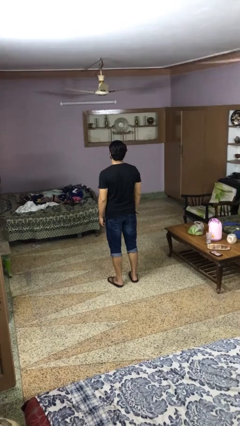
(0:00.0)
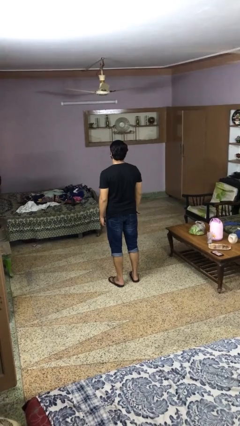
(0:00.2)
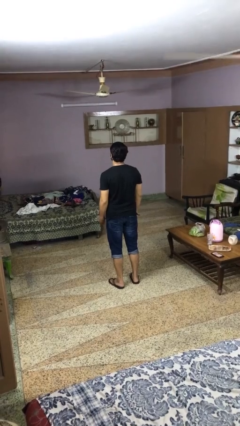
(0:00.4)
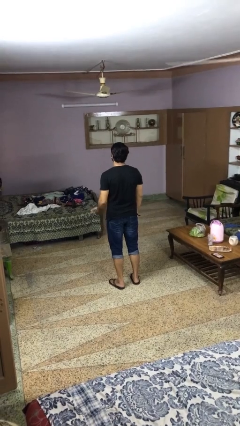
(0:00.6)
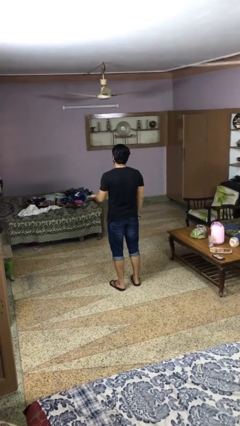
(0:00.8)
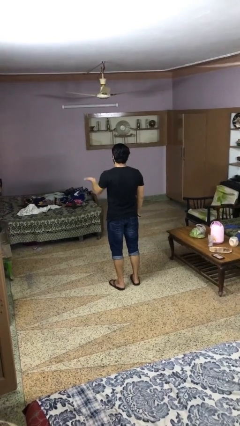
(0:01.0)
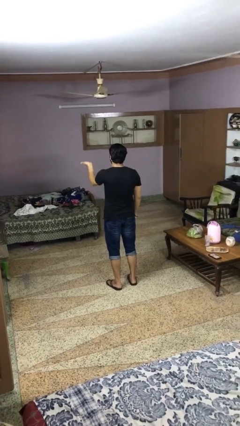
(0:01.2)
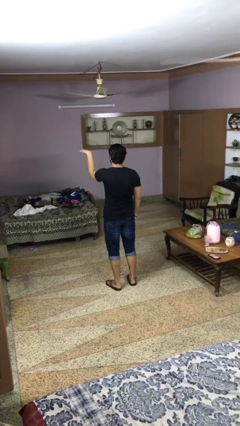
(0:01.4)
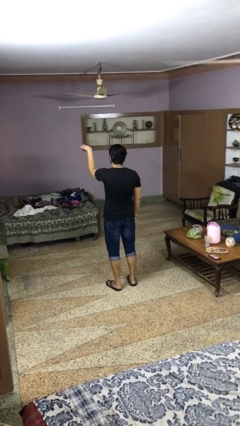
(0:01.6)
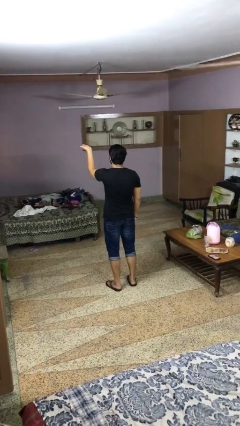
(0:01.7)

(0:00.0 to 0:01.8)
person gestures swipe up

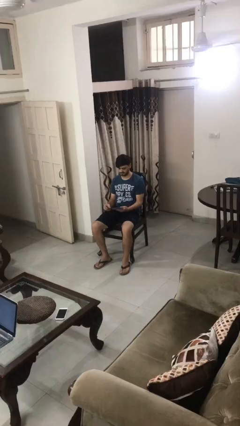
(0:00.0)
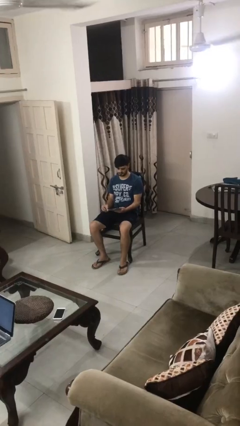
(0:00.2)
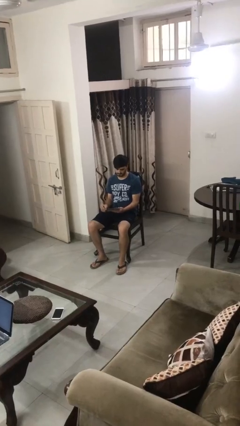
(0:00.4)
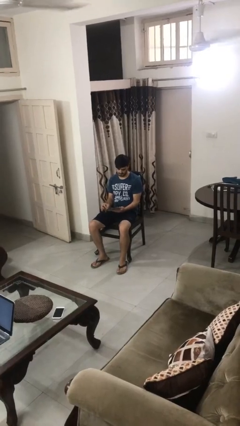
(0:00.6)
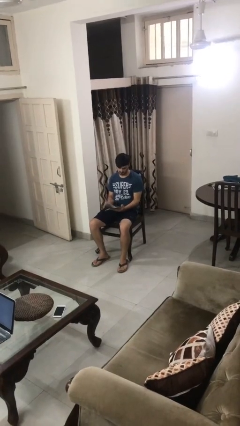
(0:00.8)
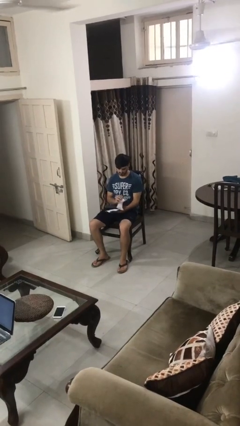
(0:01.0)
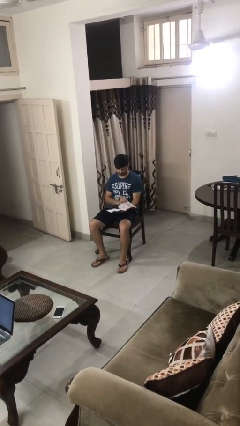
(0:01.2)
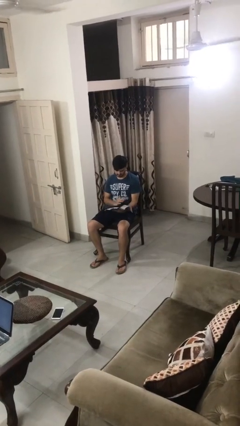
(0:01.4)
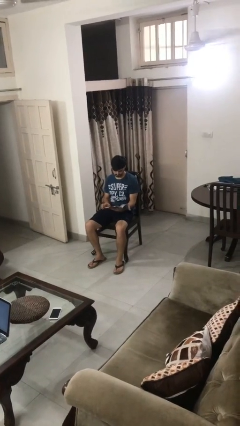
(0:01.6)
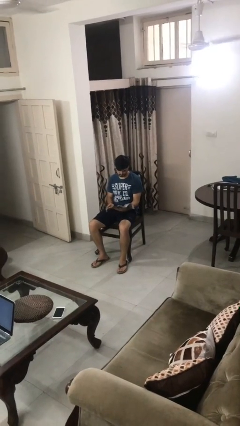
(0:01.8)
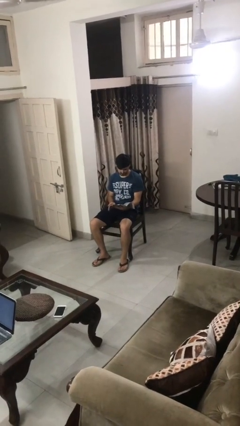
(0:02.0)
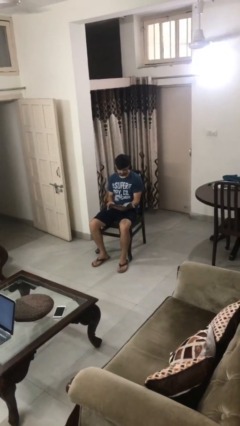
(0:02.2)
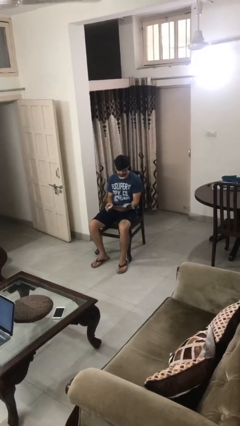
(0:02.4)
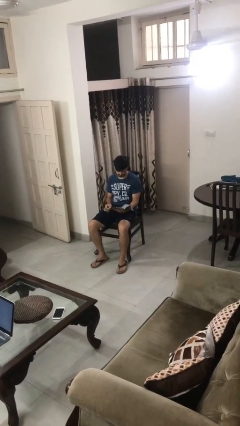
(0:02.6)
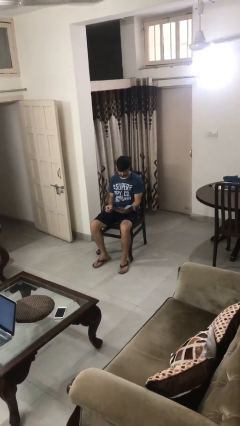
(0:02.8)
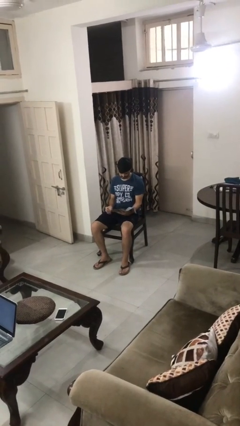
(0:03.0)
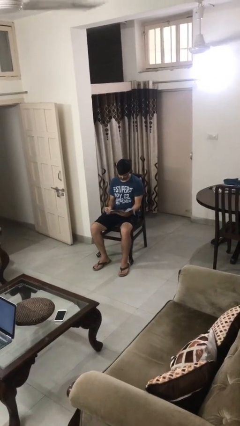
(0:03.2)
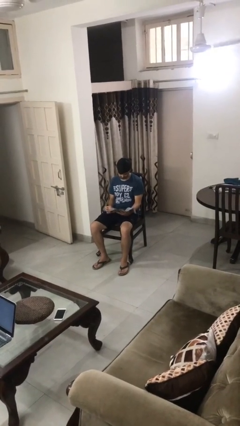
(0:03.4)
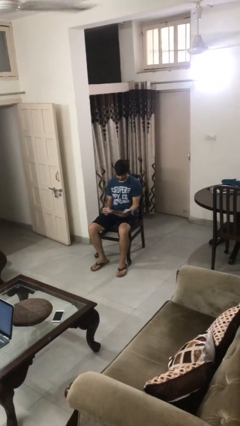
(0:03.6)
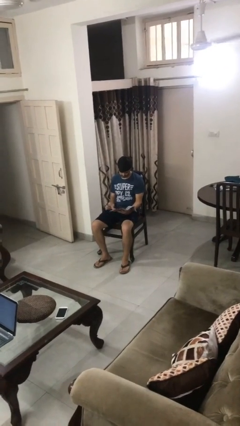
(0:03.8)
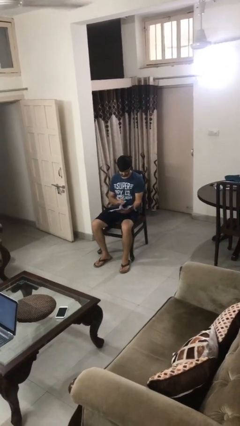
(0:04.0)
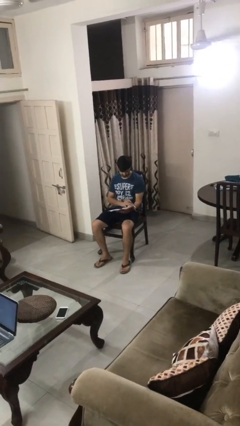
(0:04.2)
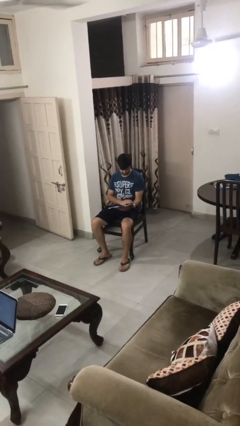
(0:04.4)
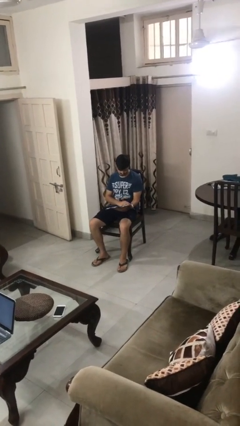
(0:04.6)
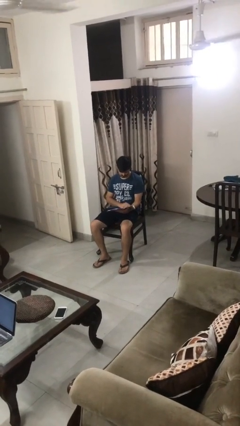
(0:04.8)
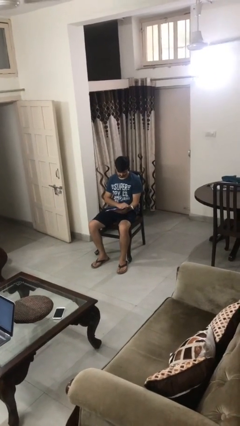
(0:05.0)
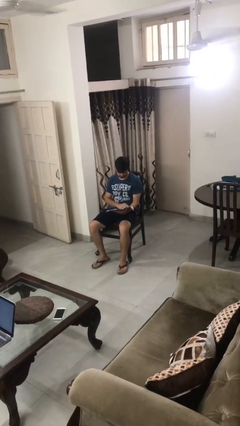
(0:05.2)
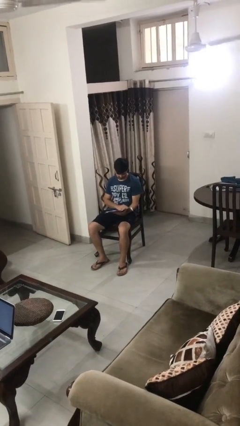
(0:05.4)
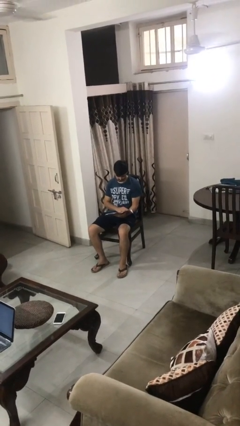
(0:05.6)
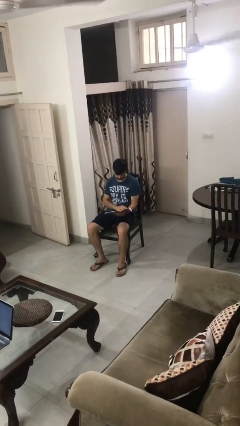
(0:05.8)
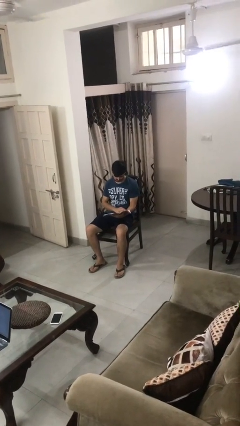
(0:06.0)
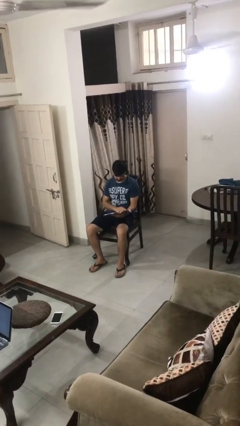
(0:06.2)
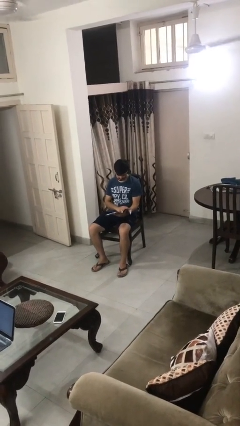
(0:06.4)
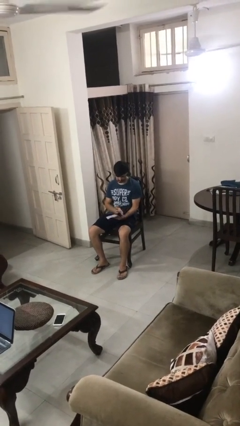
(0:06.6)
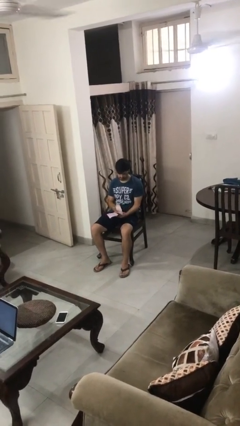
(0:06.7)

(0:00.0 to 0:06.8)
person reads magazine

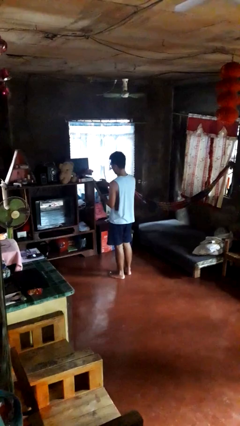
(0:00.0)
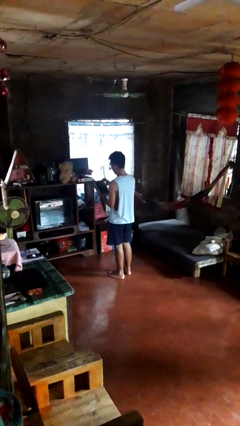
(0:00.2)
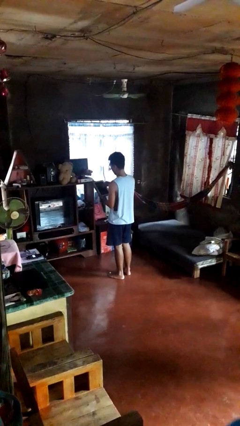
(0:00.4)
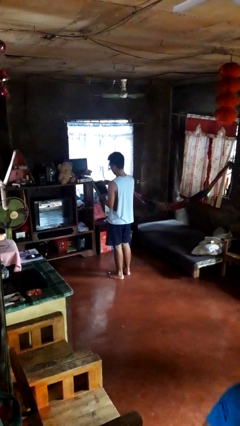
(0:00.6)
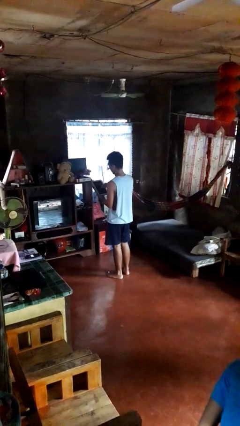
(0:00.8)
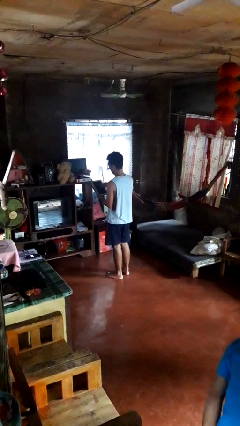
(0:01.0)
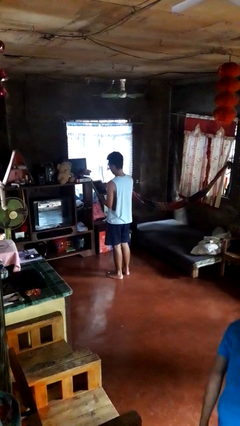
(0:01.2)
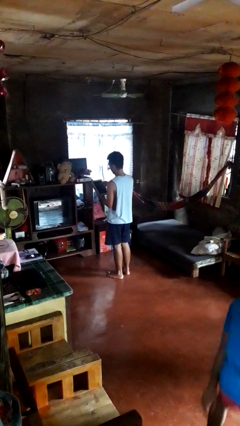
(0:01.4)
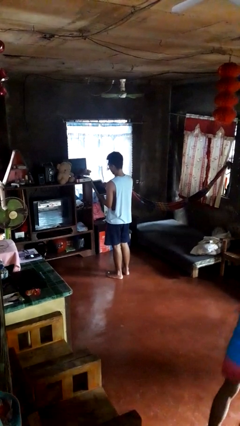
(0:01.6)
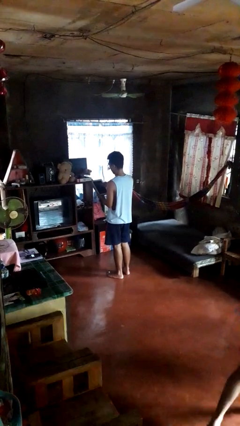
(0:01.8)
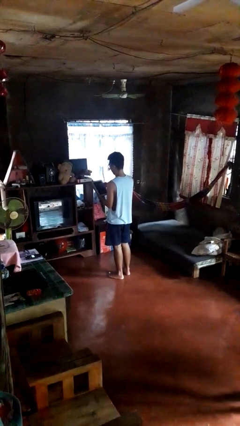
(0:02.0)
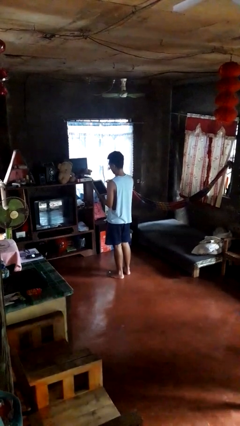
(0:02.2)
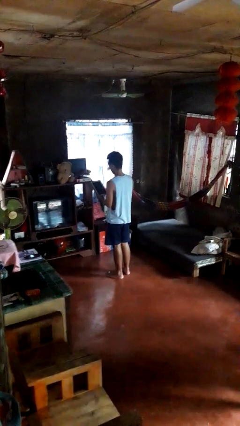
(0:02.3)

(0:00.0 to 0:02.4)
person interacts with tablet

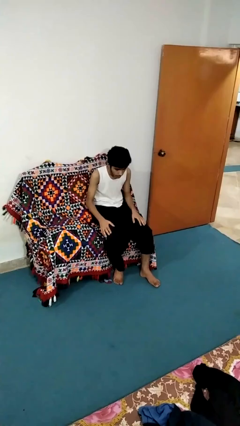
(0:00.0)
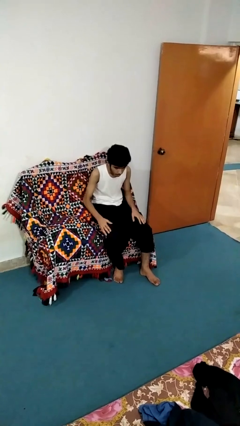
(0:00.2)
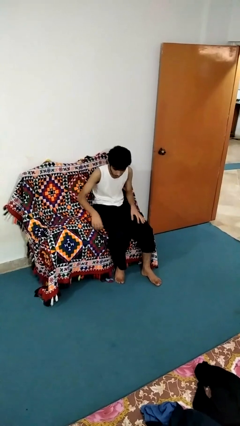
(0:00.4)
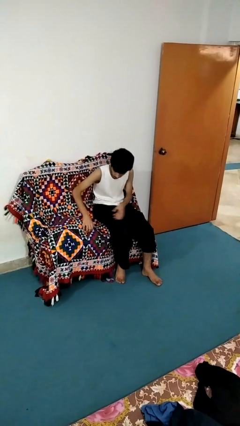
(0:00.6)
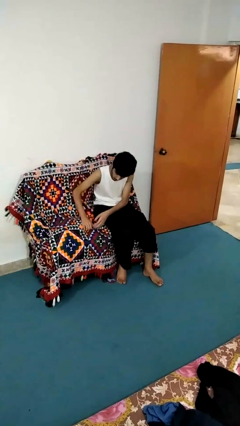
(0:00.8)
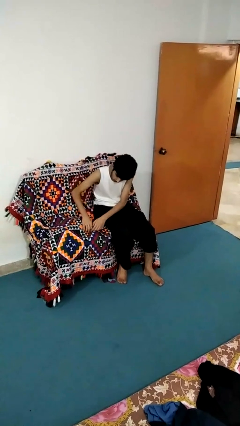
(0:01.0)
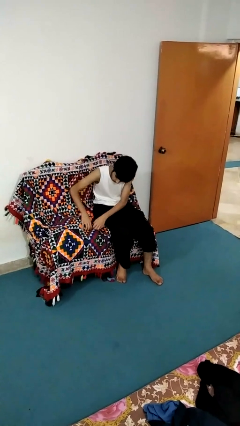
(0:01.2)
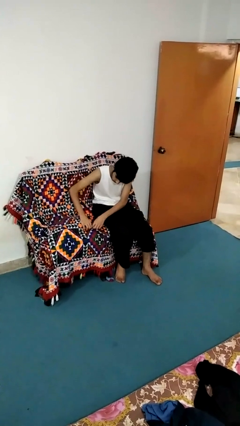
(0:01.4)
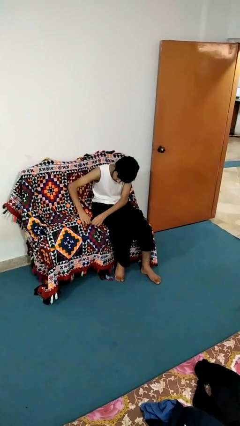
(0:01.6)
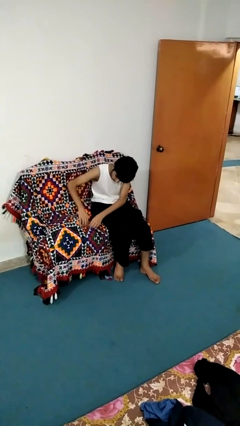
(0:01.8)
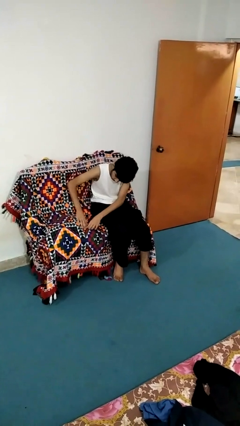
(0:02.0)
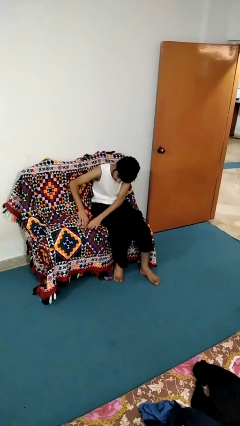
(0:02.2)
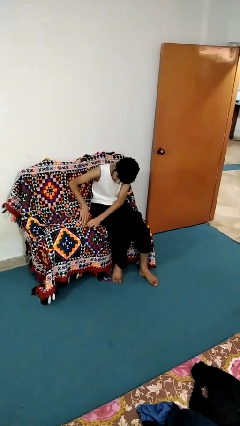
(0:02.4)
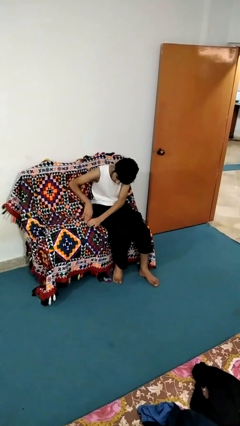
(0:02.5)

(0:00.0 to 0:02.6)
person searches in couch

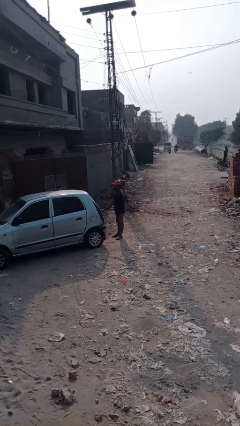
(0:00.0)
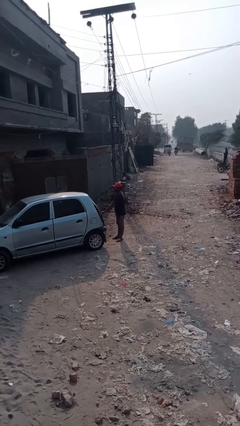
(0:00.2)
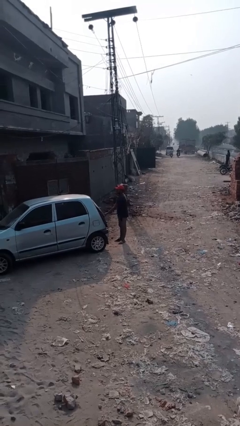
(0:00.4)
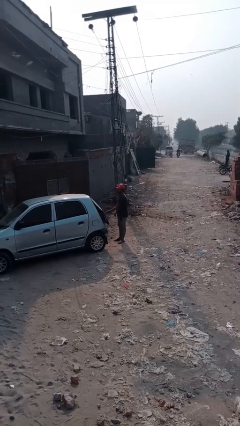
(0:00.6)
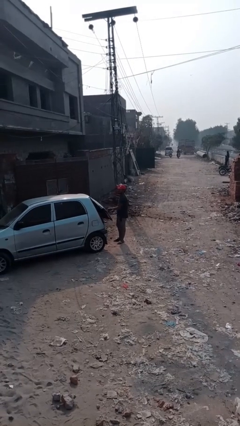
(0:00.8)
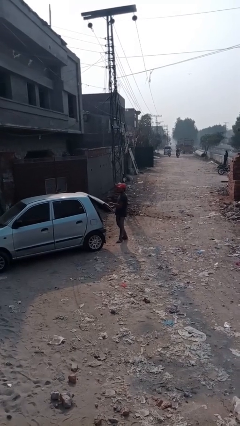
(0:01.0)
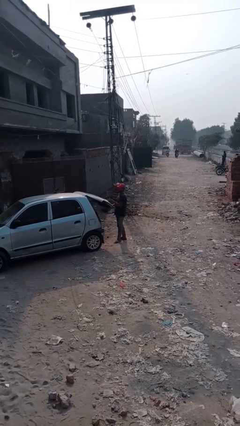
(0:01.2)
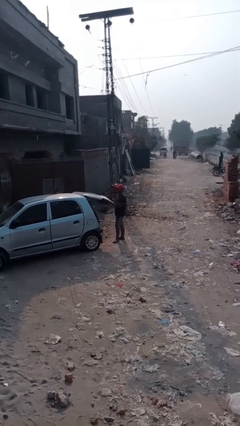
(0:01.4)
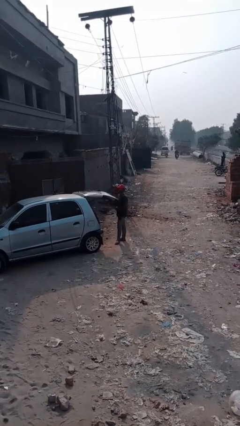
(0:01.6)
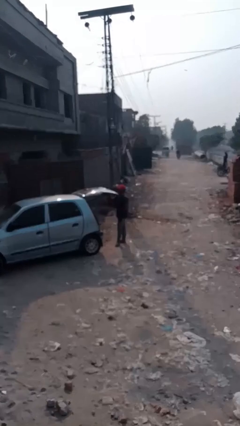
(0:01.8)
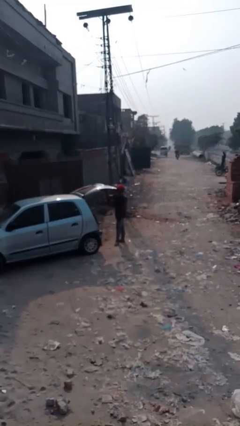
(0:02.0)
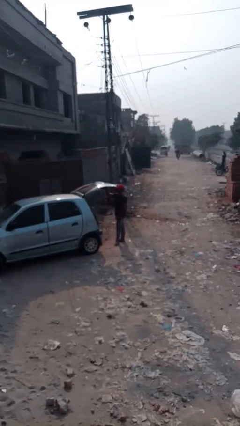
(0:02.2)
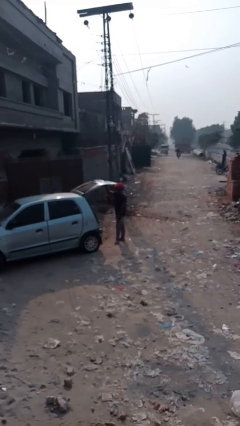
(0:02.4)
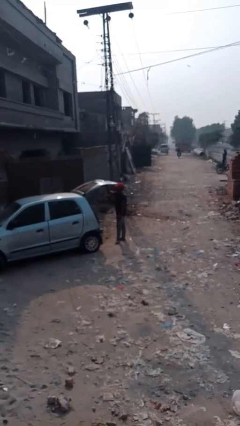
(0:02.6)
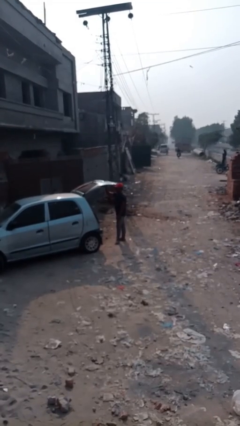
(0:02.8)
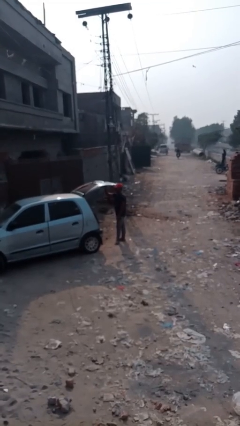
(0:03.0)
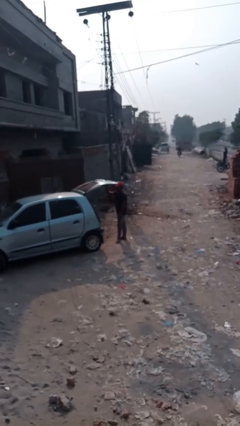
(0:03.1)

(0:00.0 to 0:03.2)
person opens car trunk

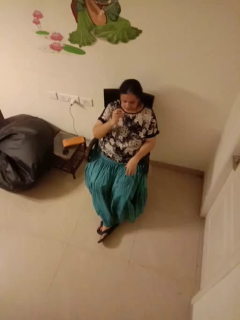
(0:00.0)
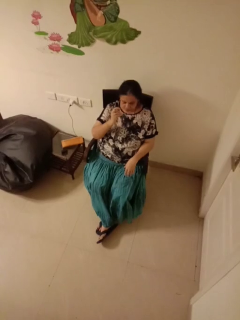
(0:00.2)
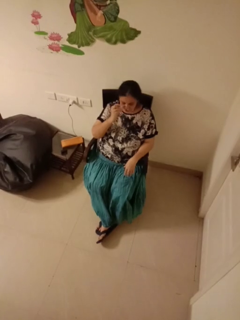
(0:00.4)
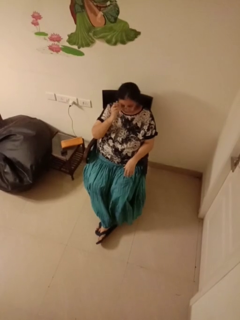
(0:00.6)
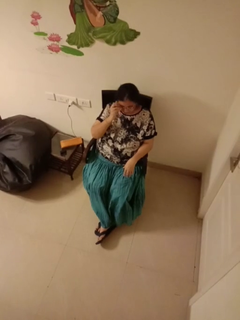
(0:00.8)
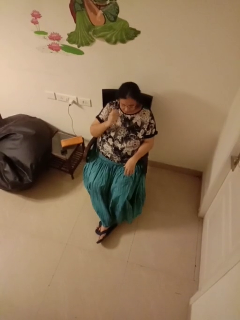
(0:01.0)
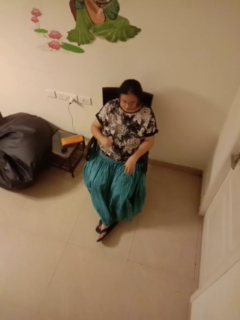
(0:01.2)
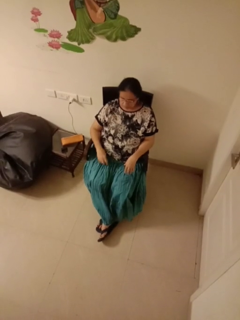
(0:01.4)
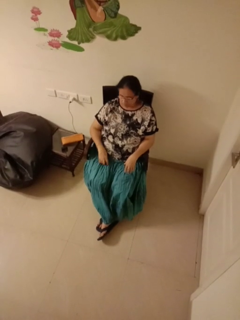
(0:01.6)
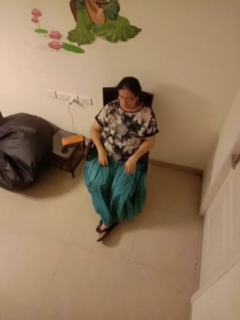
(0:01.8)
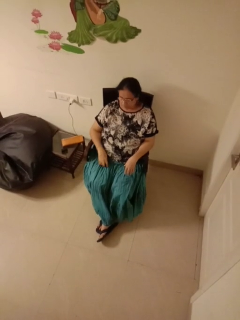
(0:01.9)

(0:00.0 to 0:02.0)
person puts on glasses
